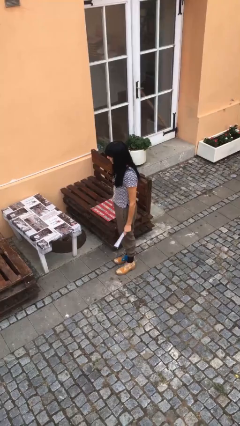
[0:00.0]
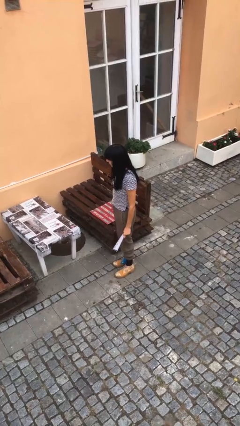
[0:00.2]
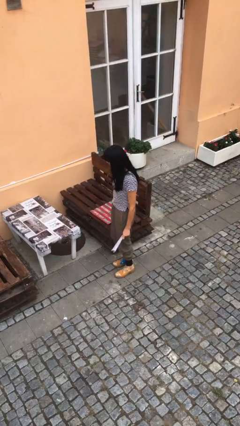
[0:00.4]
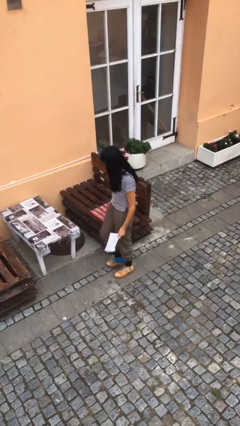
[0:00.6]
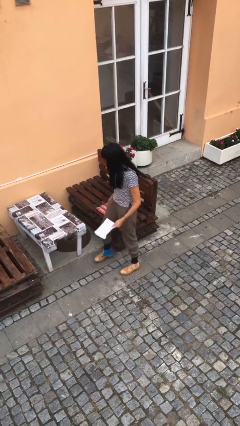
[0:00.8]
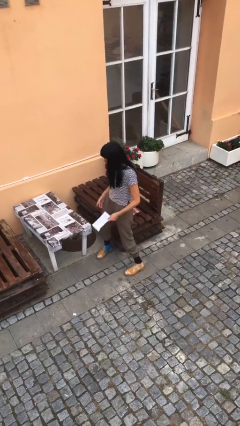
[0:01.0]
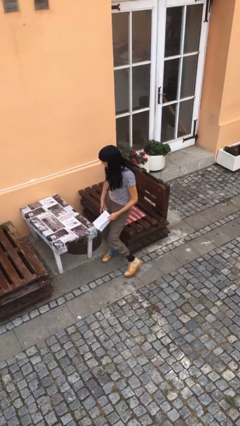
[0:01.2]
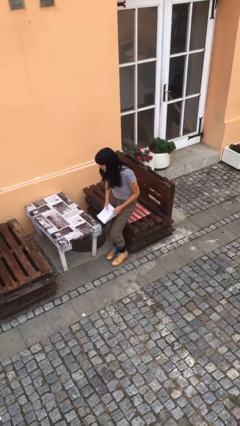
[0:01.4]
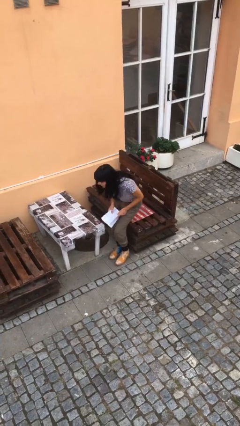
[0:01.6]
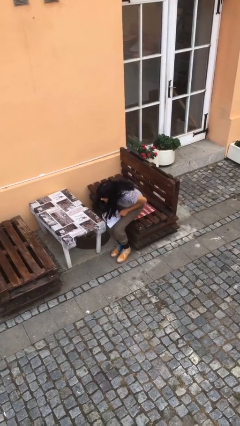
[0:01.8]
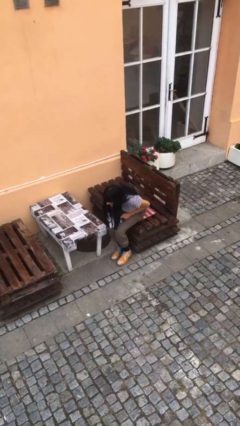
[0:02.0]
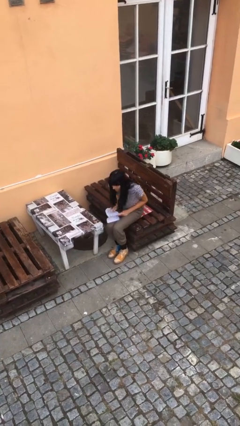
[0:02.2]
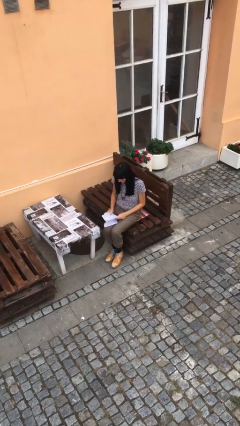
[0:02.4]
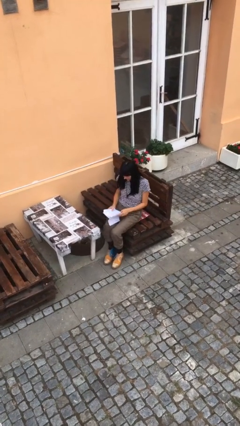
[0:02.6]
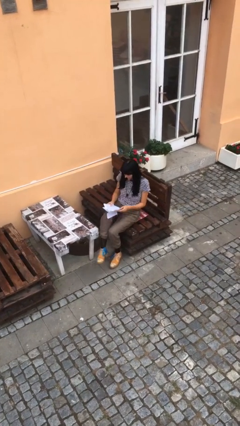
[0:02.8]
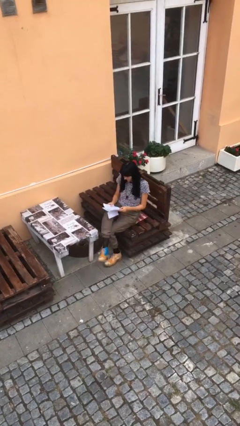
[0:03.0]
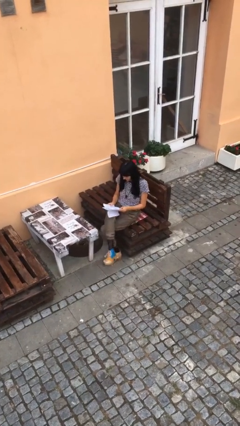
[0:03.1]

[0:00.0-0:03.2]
person sits down

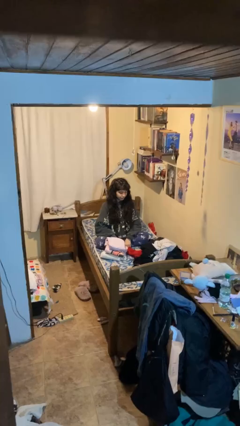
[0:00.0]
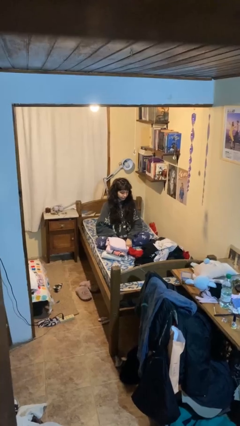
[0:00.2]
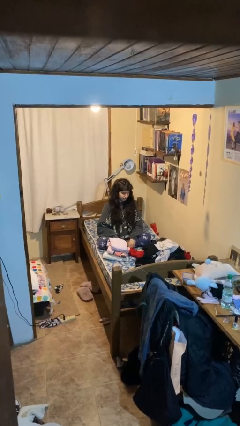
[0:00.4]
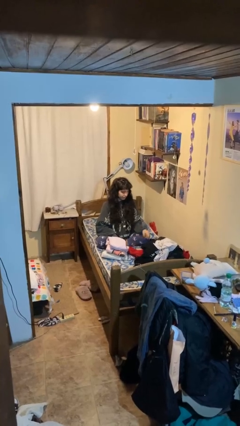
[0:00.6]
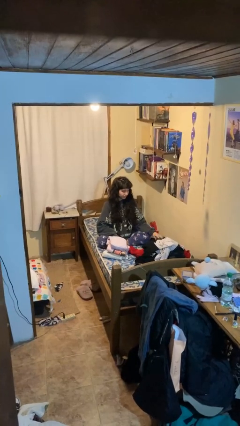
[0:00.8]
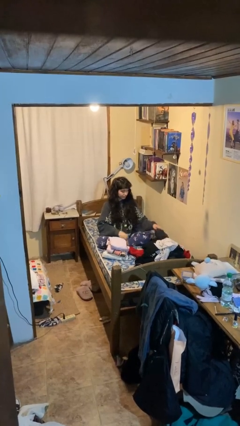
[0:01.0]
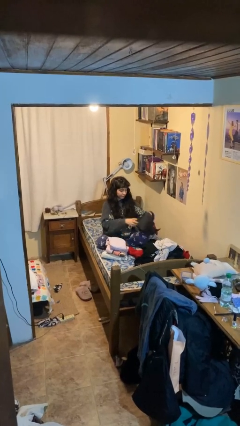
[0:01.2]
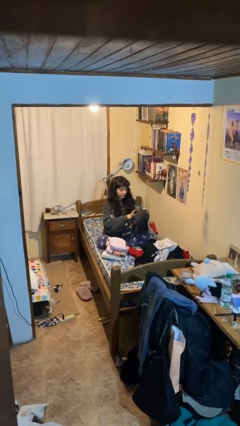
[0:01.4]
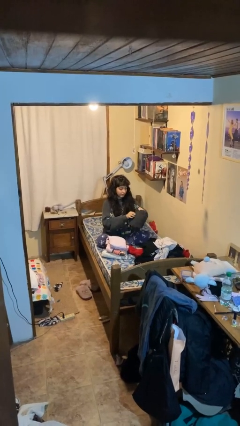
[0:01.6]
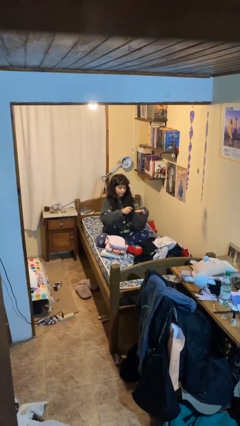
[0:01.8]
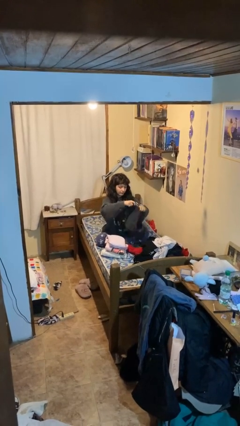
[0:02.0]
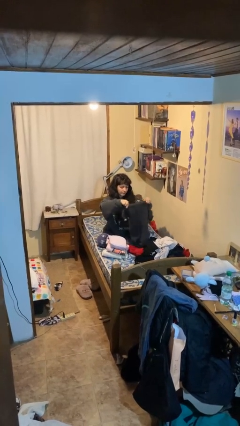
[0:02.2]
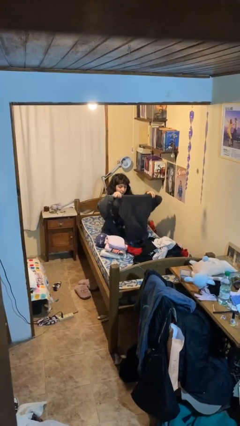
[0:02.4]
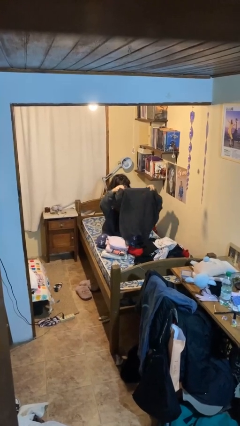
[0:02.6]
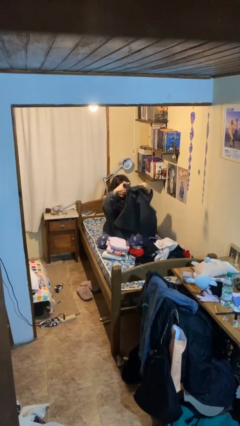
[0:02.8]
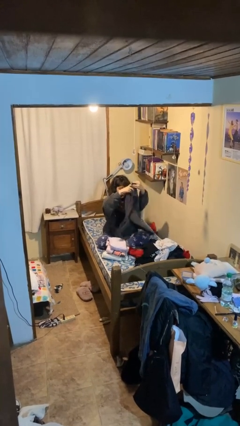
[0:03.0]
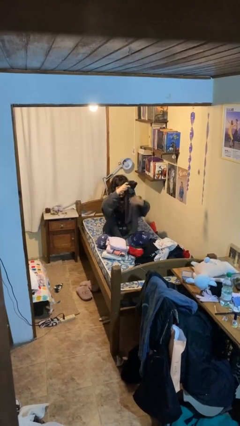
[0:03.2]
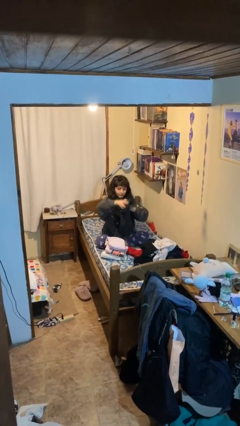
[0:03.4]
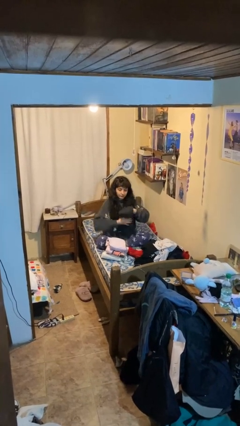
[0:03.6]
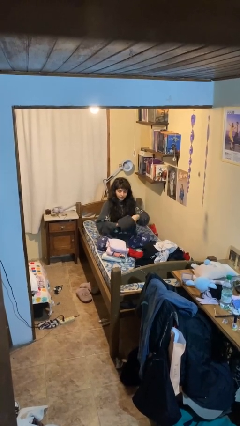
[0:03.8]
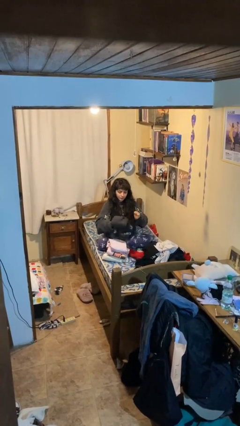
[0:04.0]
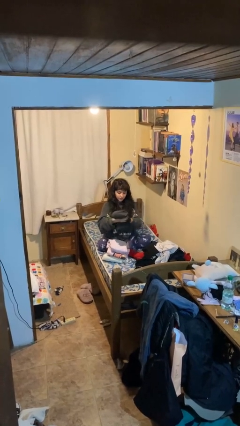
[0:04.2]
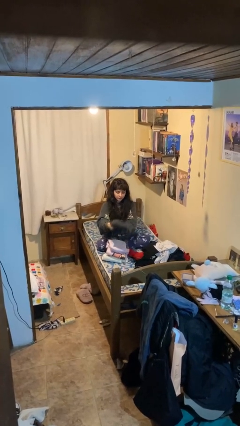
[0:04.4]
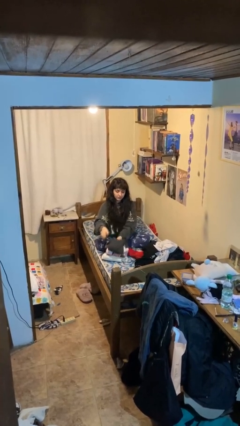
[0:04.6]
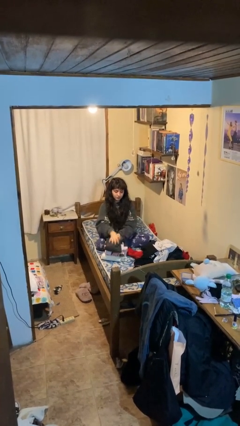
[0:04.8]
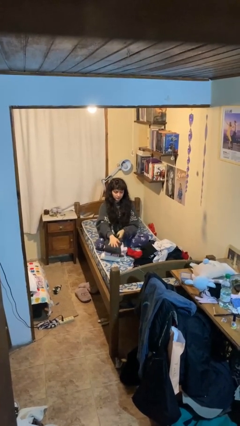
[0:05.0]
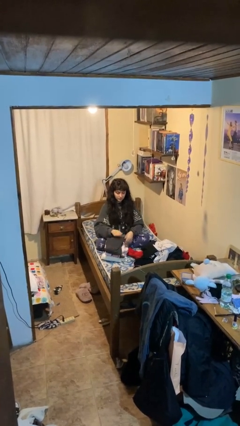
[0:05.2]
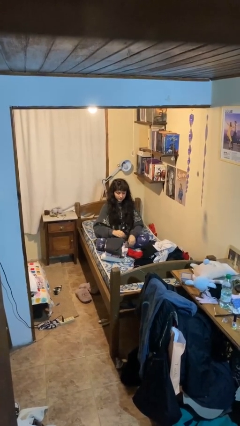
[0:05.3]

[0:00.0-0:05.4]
person folds shirt

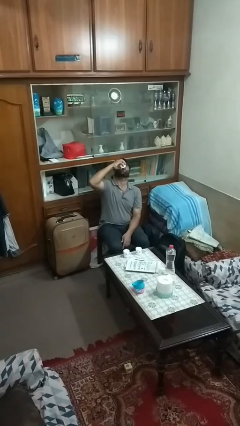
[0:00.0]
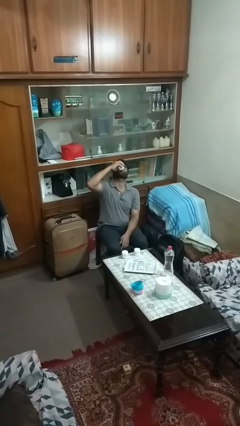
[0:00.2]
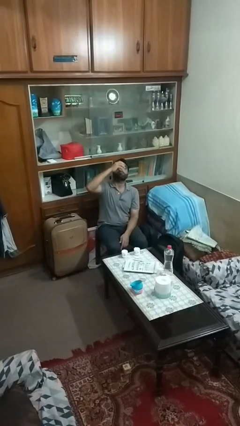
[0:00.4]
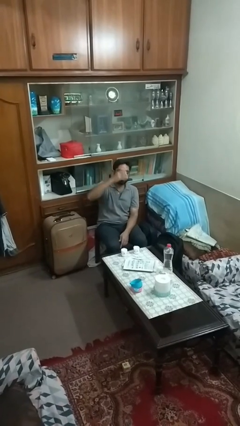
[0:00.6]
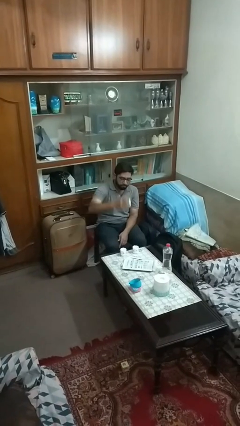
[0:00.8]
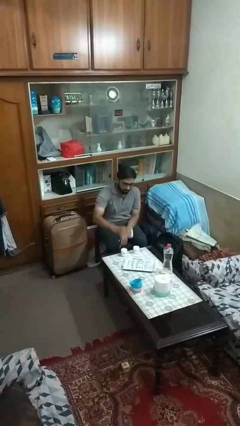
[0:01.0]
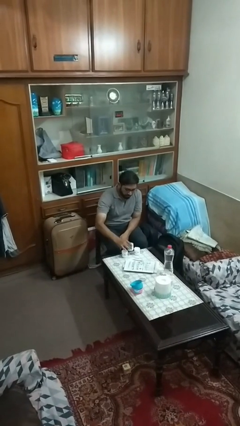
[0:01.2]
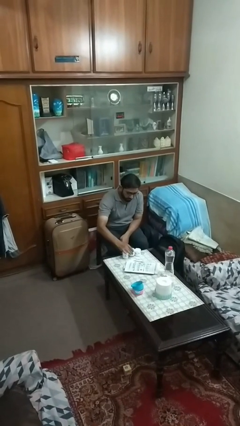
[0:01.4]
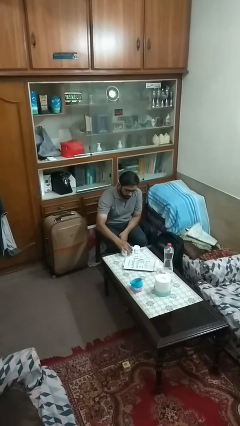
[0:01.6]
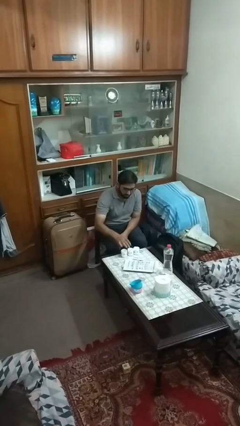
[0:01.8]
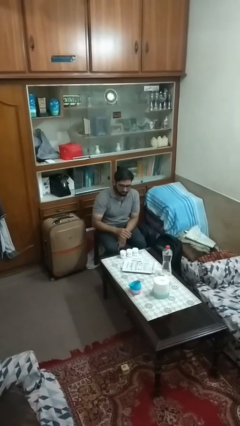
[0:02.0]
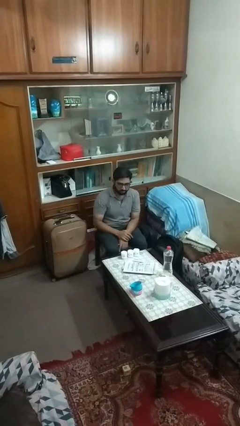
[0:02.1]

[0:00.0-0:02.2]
person puts down object on table

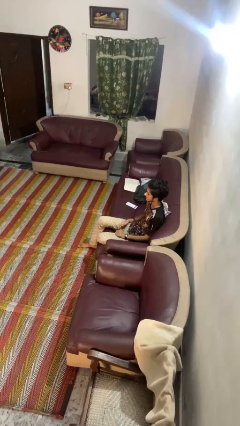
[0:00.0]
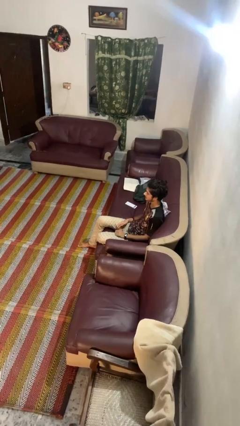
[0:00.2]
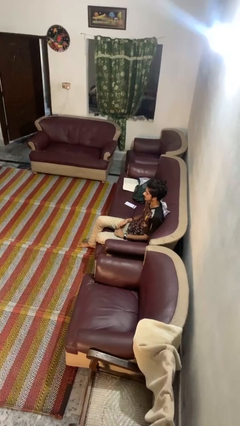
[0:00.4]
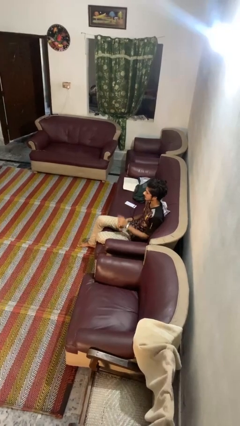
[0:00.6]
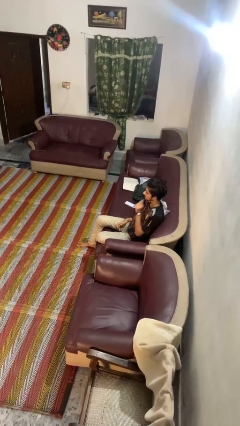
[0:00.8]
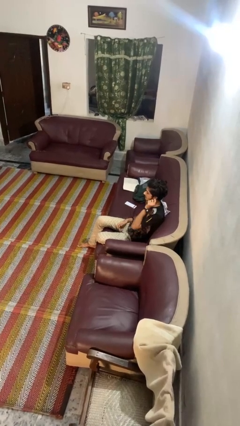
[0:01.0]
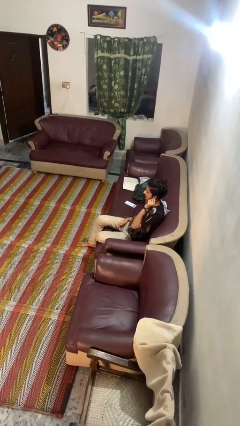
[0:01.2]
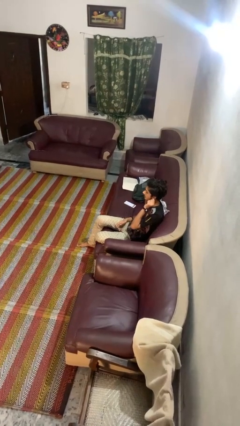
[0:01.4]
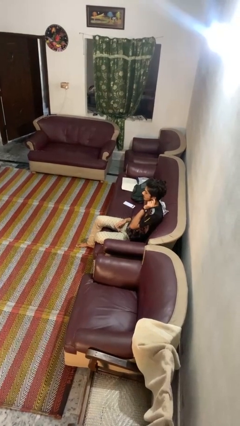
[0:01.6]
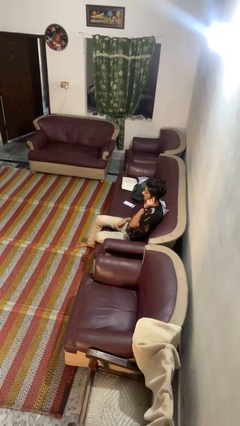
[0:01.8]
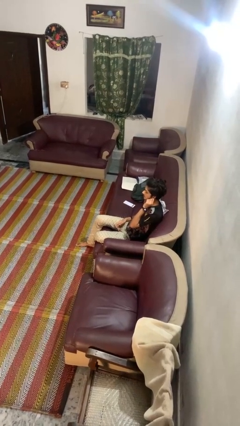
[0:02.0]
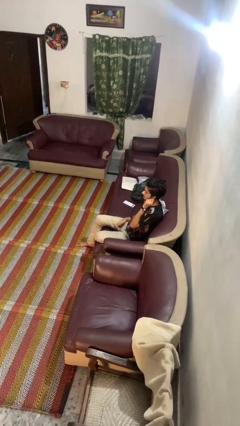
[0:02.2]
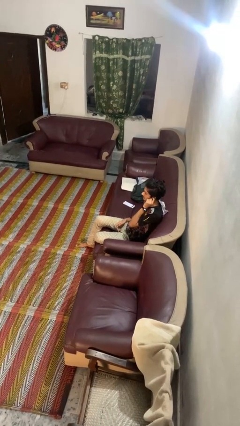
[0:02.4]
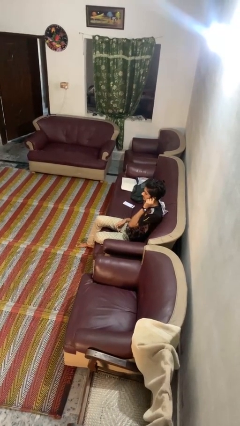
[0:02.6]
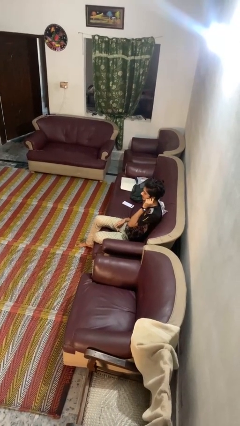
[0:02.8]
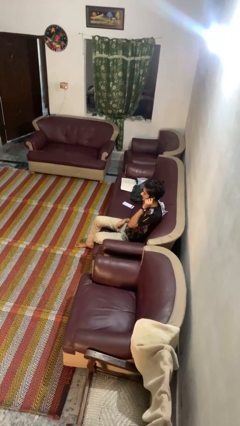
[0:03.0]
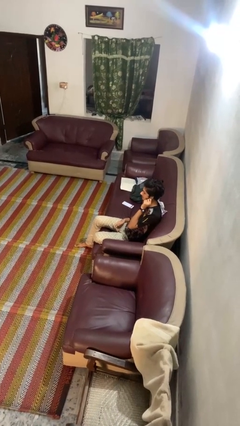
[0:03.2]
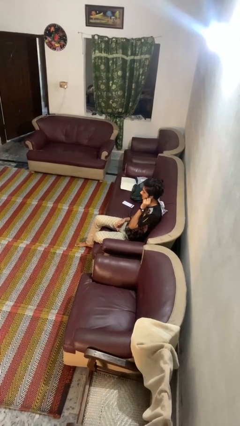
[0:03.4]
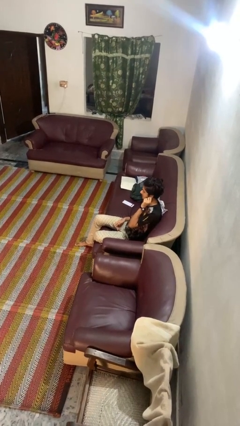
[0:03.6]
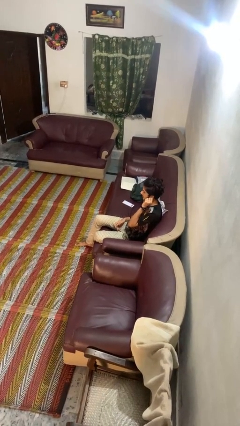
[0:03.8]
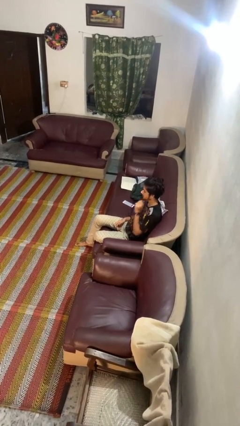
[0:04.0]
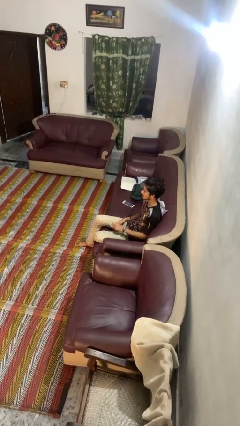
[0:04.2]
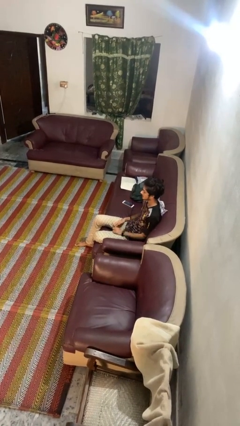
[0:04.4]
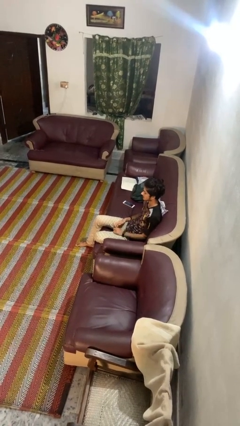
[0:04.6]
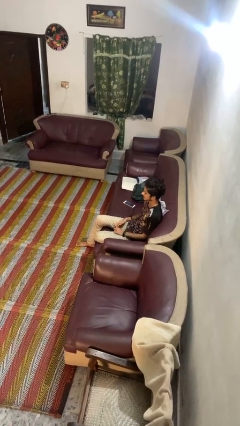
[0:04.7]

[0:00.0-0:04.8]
person touches earlobe

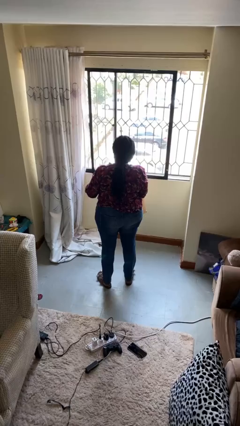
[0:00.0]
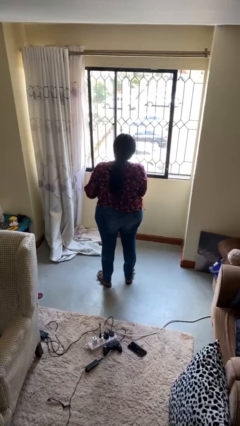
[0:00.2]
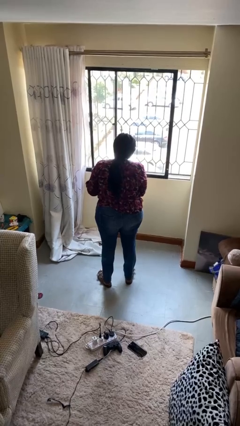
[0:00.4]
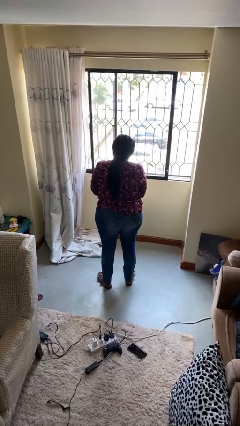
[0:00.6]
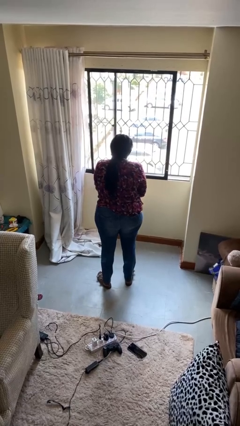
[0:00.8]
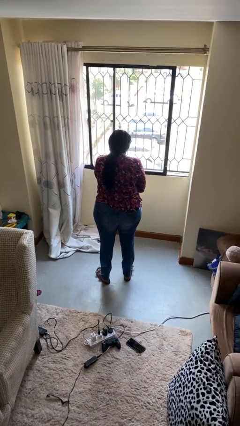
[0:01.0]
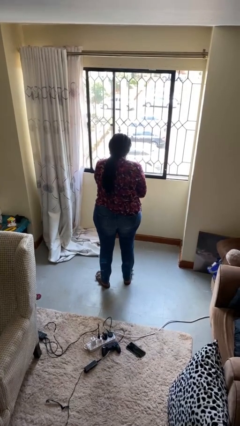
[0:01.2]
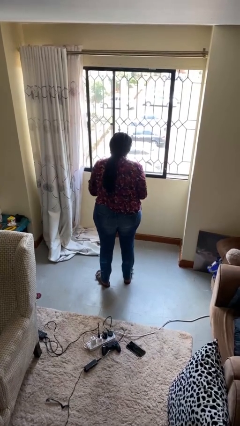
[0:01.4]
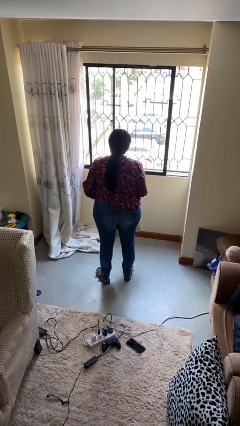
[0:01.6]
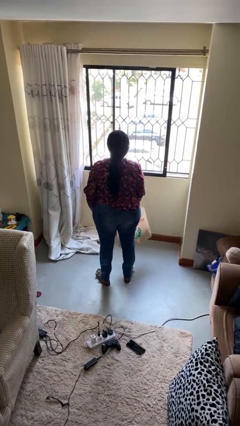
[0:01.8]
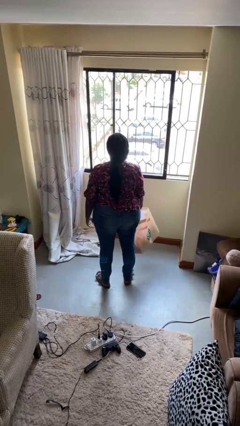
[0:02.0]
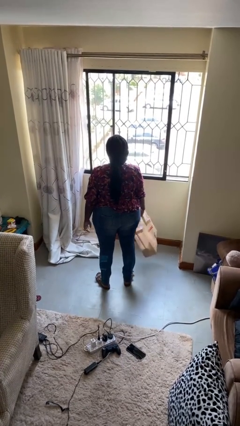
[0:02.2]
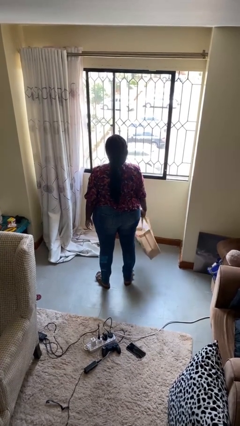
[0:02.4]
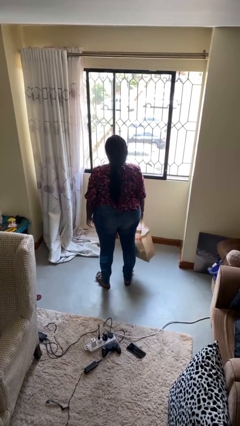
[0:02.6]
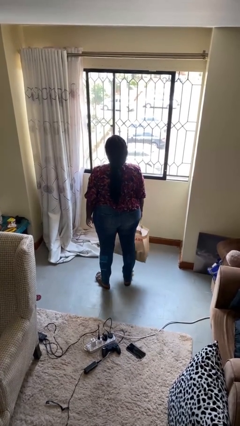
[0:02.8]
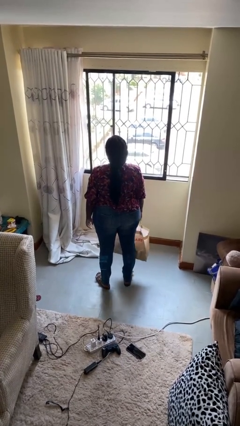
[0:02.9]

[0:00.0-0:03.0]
person puts object into bag
